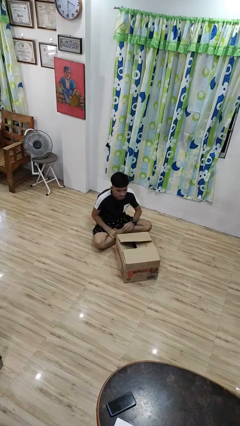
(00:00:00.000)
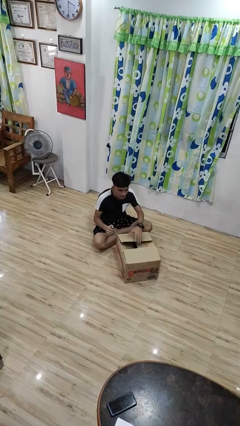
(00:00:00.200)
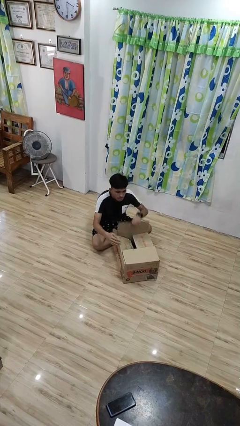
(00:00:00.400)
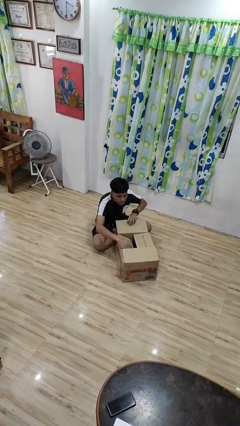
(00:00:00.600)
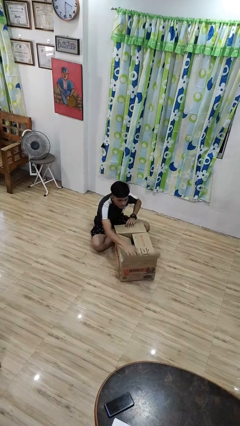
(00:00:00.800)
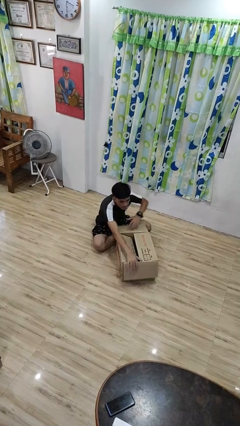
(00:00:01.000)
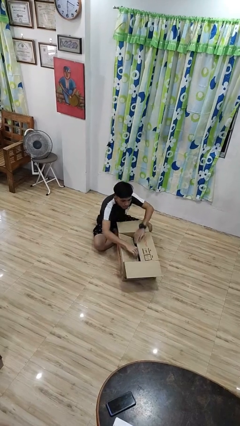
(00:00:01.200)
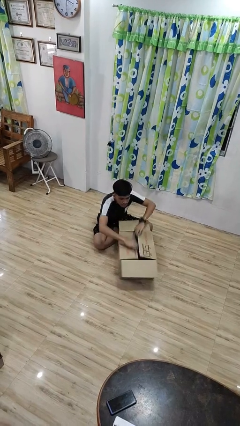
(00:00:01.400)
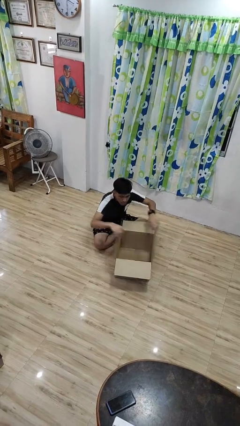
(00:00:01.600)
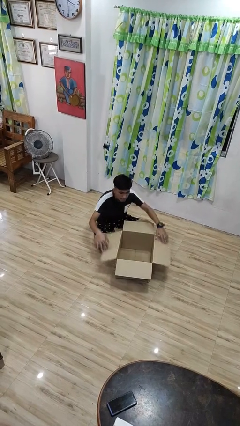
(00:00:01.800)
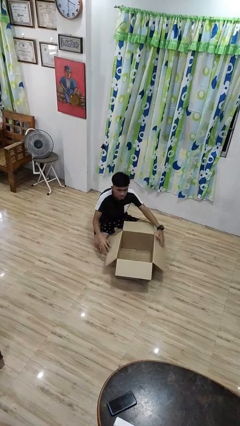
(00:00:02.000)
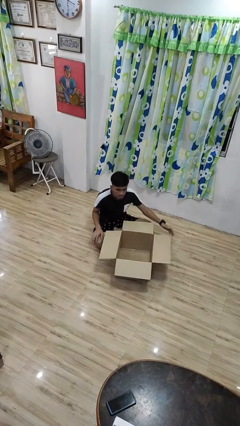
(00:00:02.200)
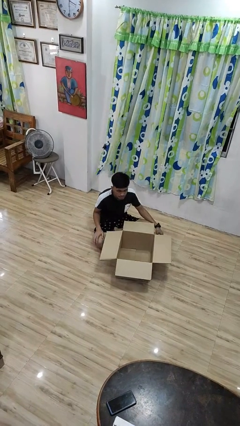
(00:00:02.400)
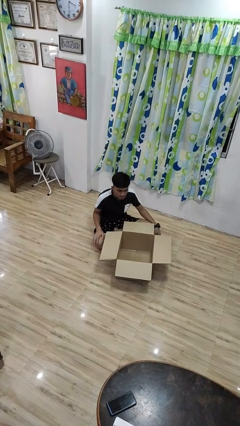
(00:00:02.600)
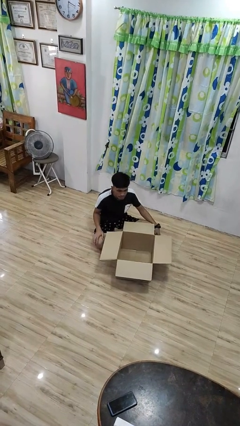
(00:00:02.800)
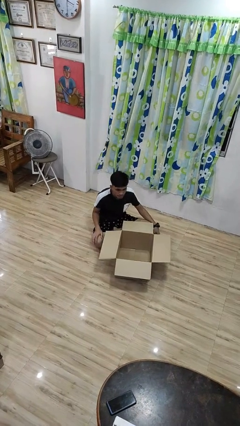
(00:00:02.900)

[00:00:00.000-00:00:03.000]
person opens box

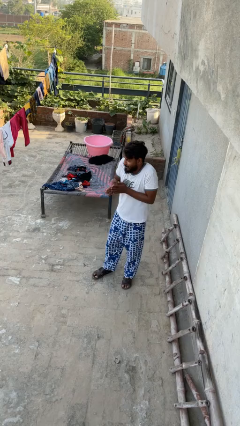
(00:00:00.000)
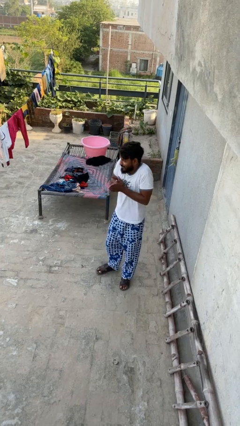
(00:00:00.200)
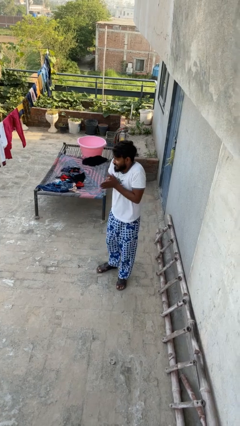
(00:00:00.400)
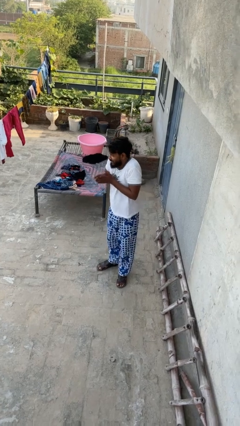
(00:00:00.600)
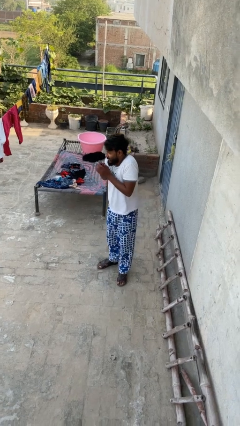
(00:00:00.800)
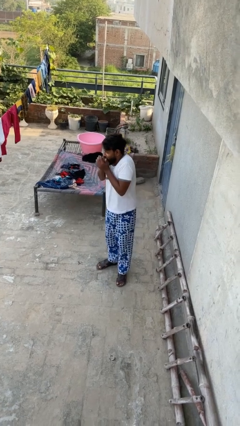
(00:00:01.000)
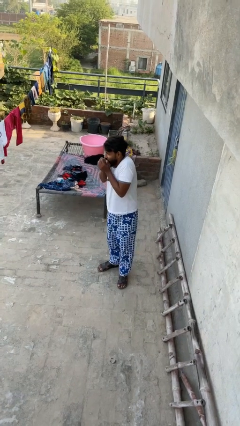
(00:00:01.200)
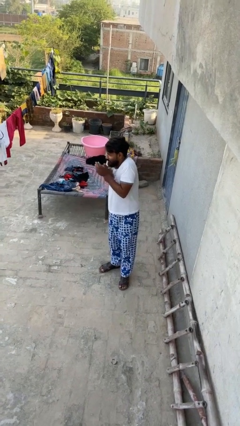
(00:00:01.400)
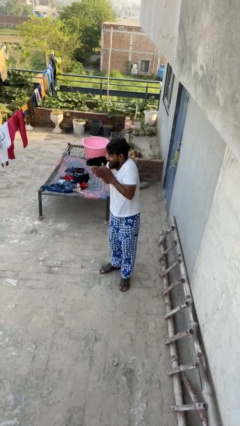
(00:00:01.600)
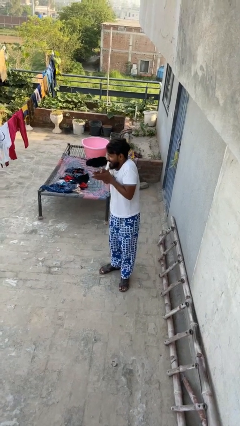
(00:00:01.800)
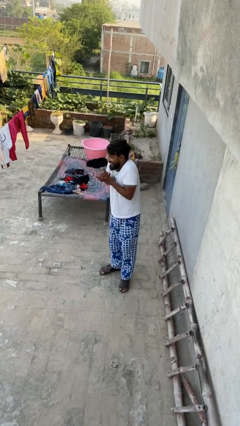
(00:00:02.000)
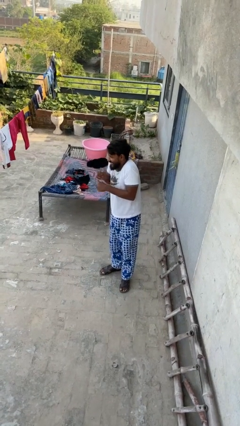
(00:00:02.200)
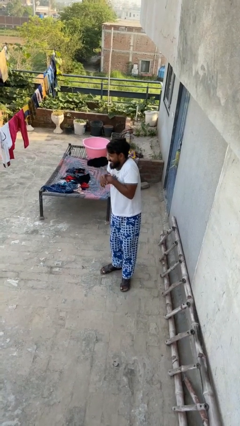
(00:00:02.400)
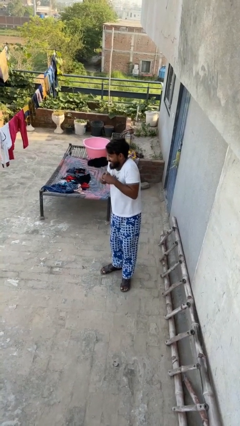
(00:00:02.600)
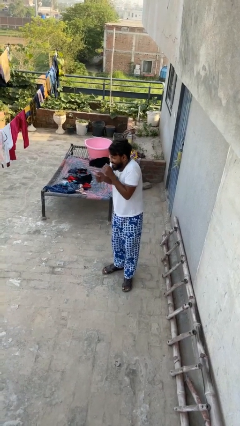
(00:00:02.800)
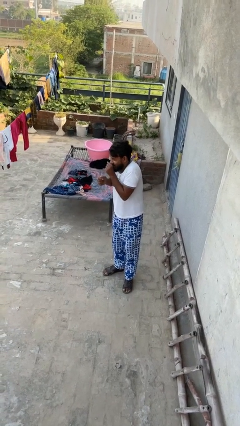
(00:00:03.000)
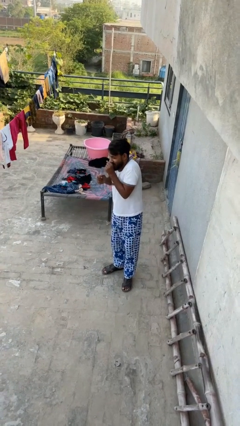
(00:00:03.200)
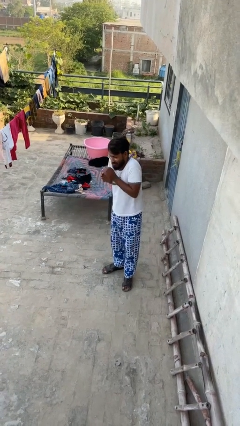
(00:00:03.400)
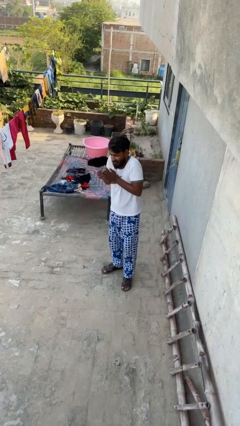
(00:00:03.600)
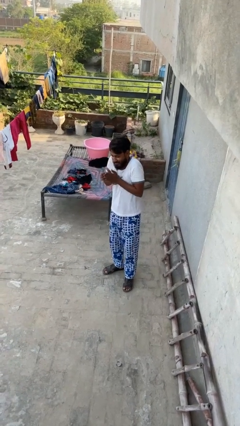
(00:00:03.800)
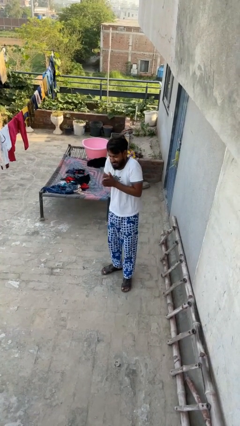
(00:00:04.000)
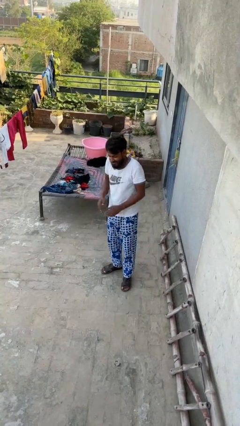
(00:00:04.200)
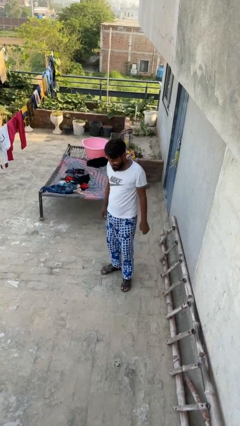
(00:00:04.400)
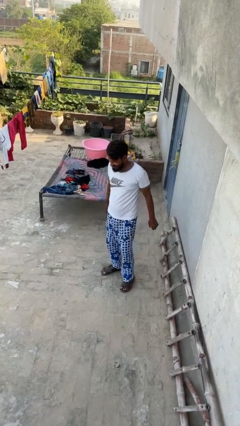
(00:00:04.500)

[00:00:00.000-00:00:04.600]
person blows into hands

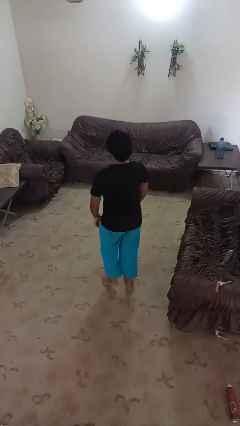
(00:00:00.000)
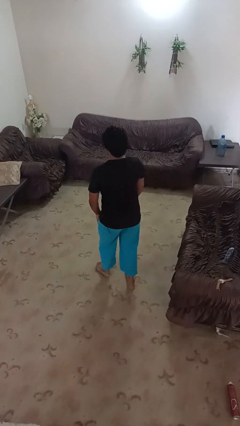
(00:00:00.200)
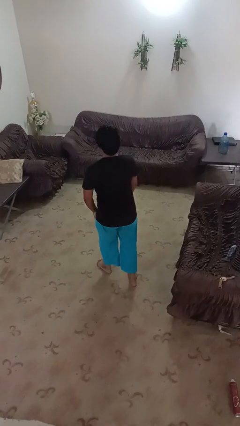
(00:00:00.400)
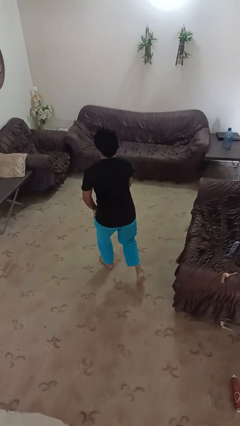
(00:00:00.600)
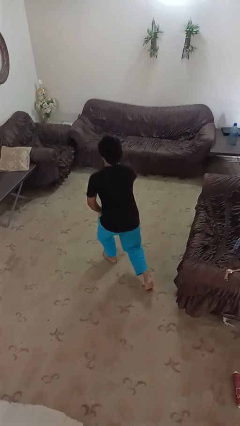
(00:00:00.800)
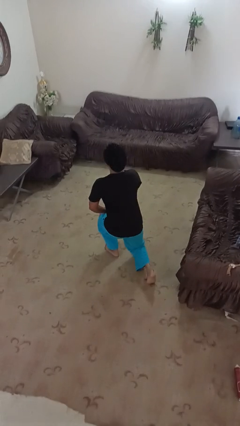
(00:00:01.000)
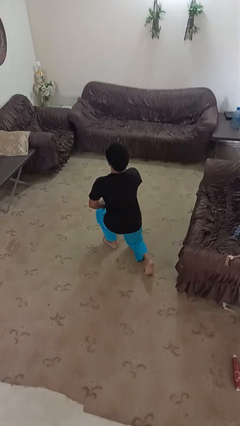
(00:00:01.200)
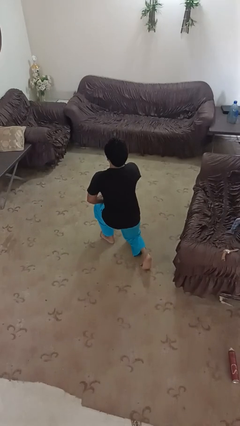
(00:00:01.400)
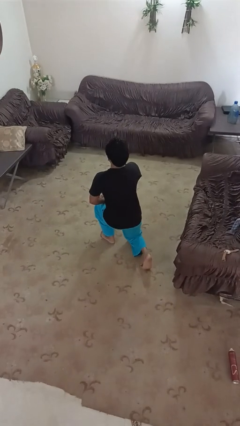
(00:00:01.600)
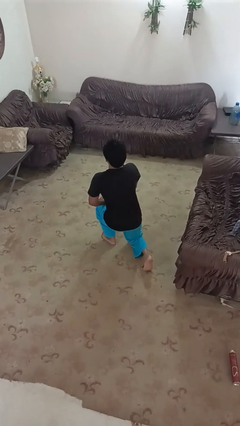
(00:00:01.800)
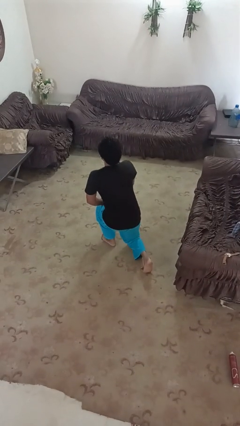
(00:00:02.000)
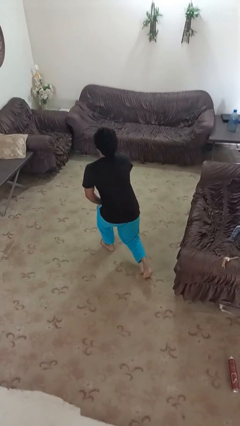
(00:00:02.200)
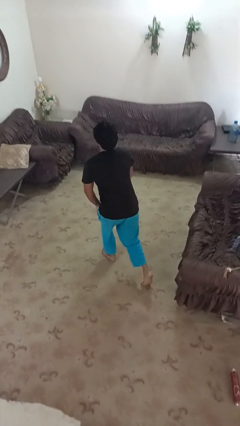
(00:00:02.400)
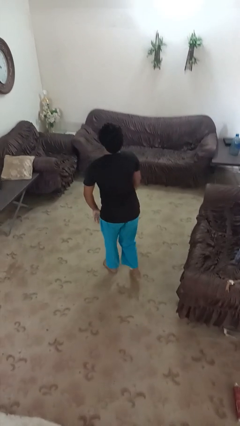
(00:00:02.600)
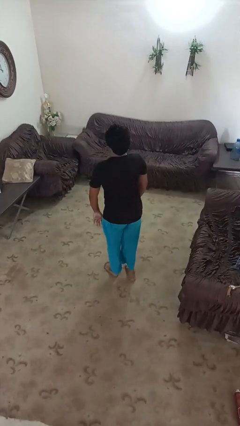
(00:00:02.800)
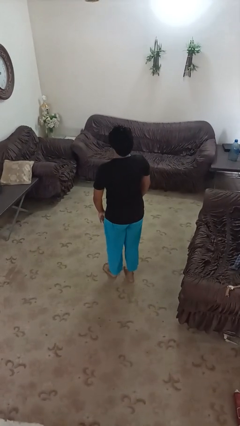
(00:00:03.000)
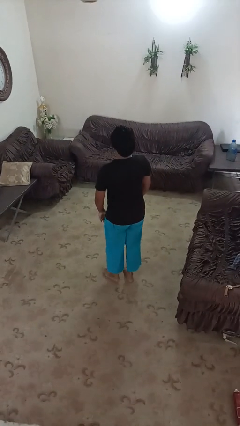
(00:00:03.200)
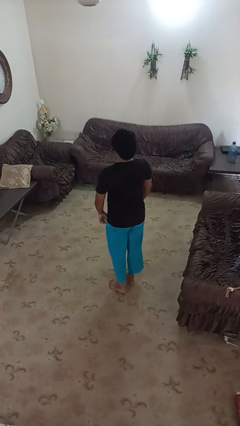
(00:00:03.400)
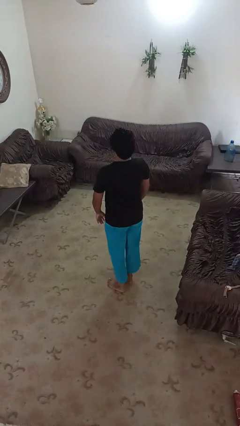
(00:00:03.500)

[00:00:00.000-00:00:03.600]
person exercises with lunges

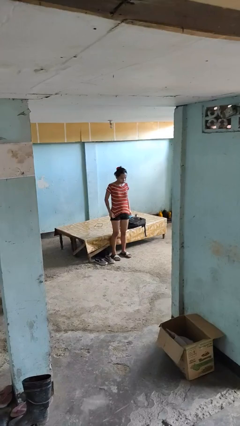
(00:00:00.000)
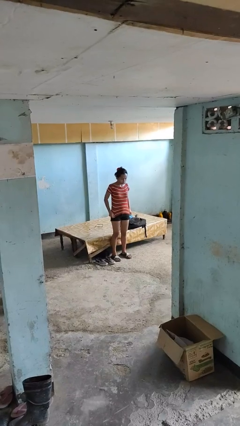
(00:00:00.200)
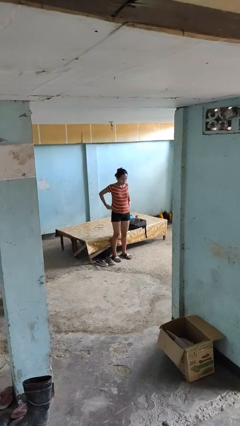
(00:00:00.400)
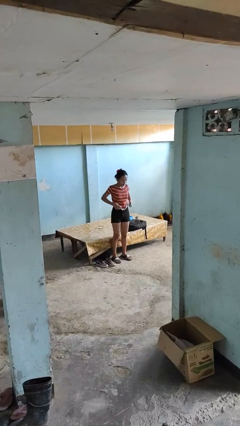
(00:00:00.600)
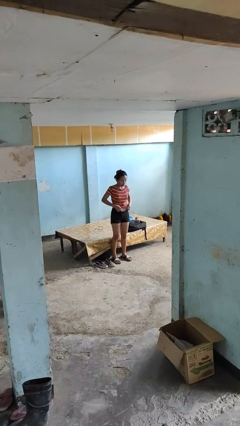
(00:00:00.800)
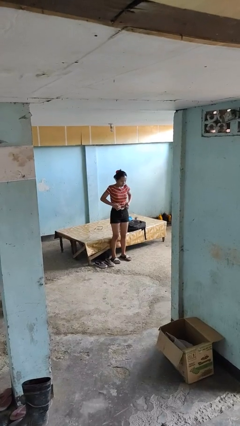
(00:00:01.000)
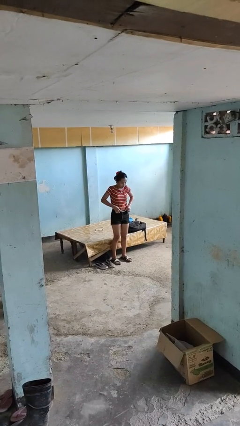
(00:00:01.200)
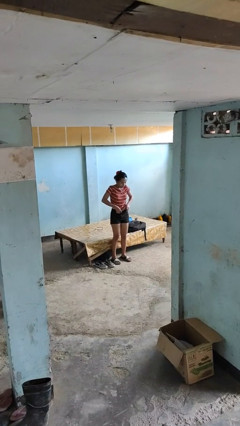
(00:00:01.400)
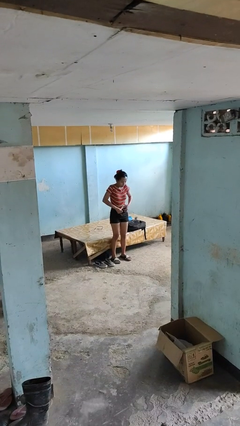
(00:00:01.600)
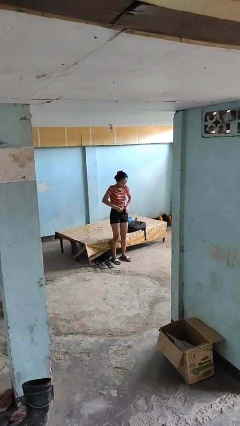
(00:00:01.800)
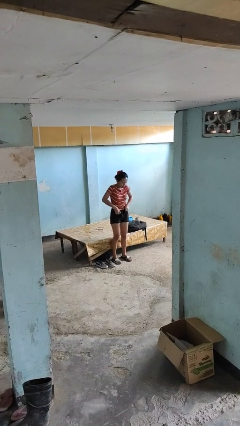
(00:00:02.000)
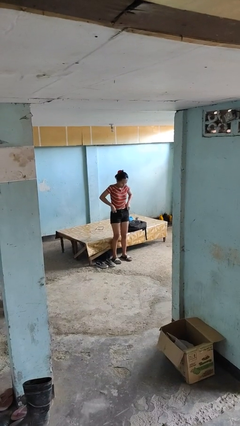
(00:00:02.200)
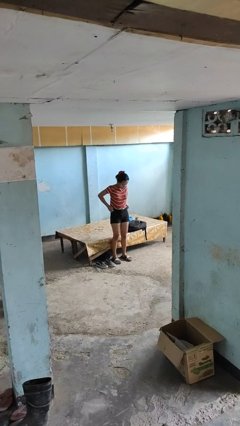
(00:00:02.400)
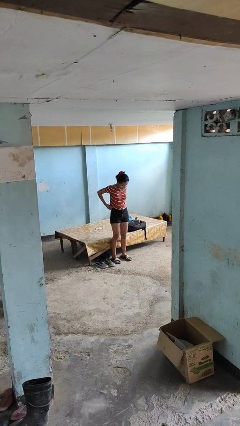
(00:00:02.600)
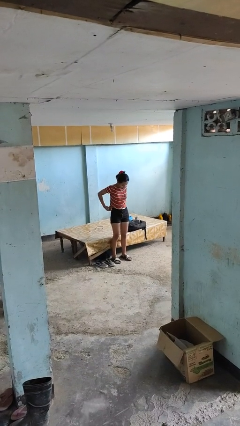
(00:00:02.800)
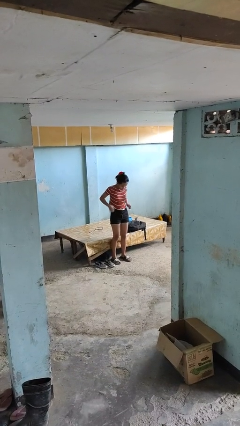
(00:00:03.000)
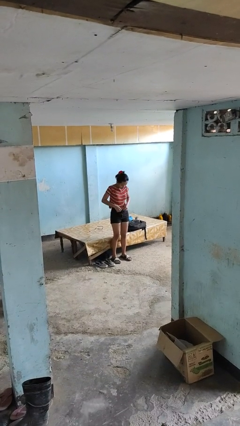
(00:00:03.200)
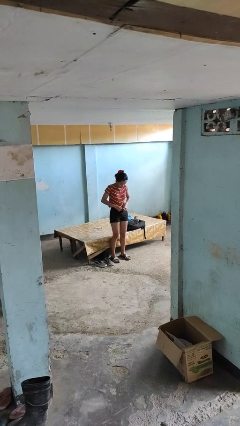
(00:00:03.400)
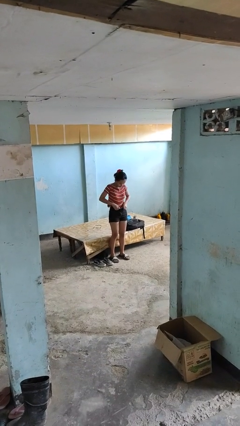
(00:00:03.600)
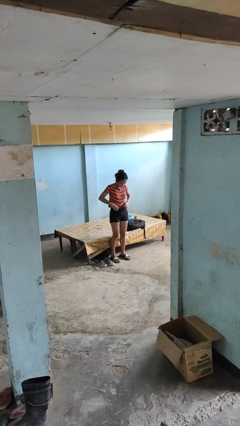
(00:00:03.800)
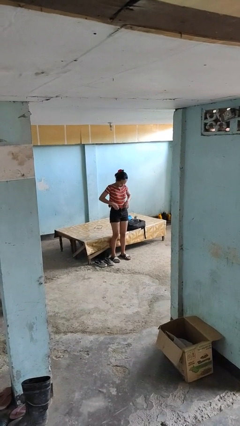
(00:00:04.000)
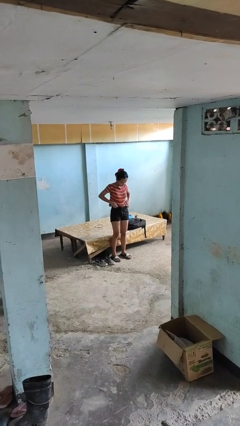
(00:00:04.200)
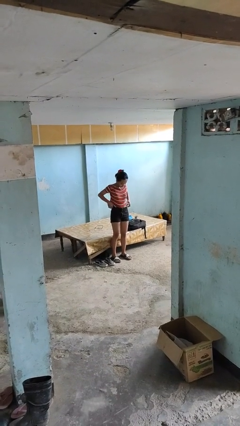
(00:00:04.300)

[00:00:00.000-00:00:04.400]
person tucks in shirt

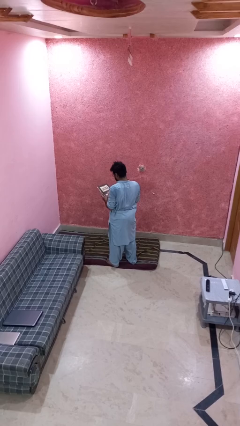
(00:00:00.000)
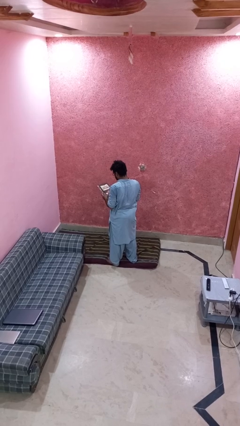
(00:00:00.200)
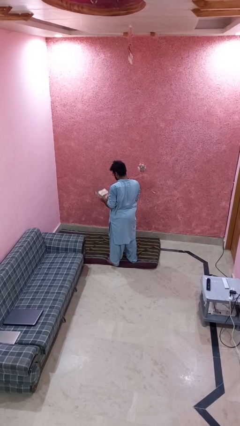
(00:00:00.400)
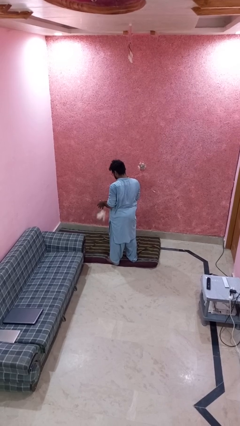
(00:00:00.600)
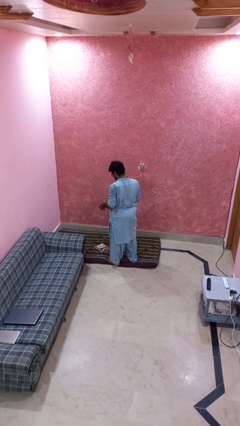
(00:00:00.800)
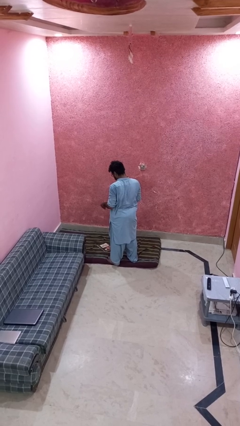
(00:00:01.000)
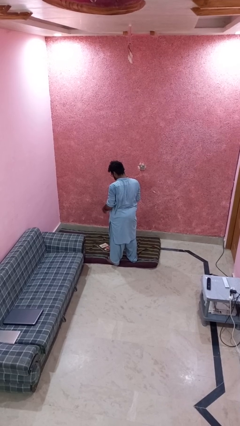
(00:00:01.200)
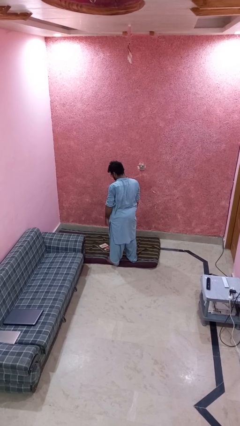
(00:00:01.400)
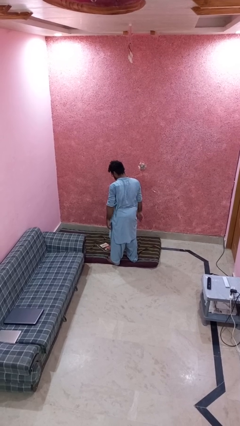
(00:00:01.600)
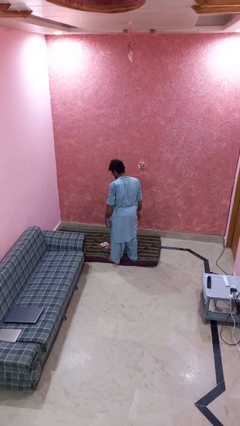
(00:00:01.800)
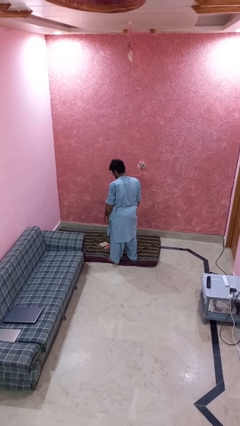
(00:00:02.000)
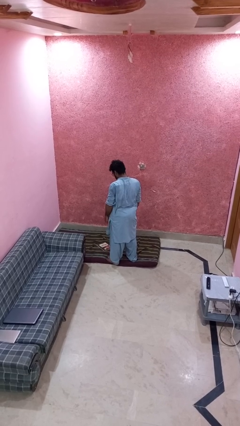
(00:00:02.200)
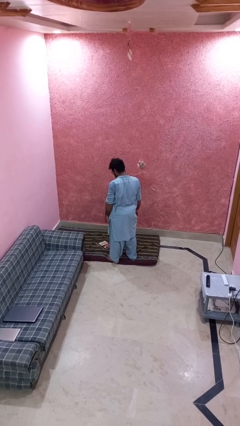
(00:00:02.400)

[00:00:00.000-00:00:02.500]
person drops object
